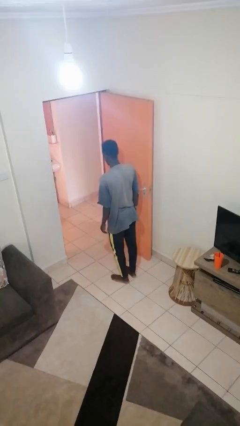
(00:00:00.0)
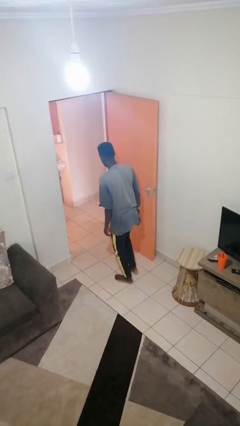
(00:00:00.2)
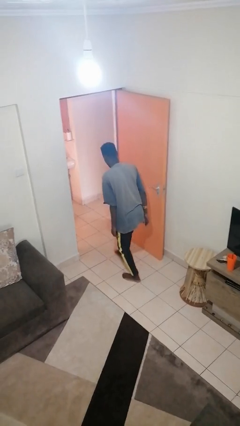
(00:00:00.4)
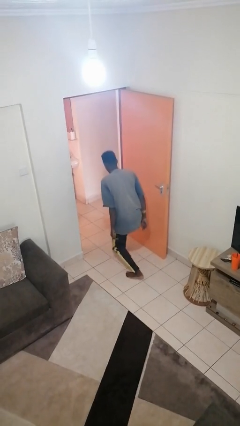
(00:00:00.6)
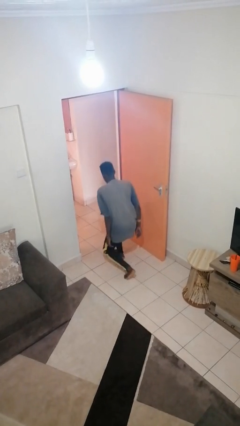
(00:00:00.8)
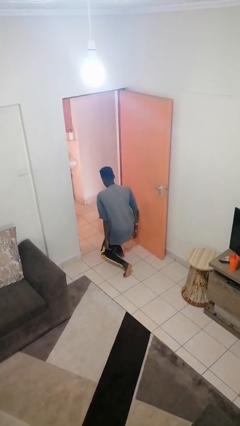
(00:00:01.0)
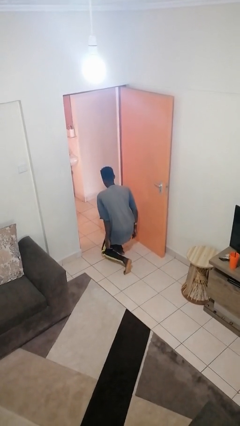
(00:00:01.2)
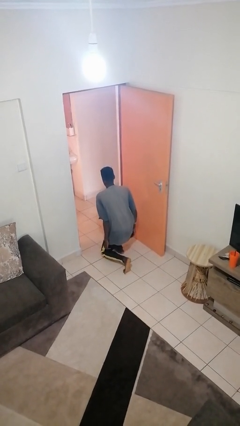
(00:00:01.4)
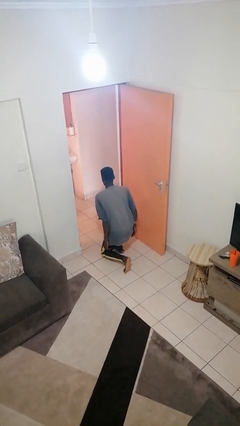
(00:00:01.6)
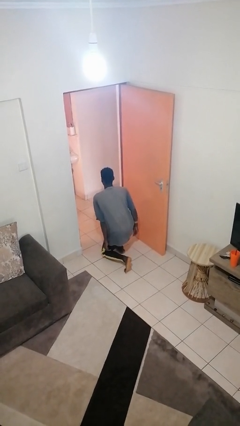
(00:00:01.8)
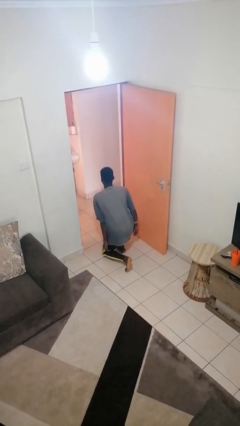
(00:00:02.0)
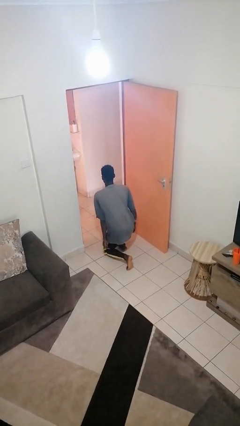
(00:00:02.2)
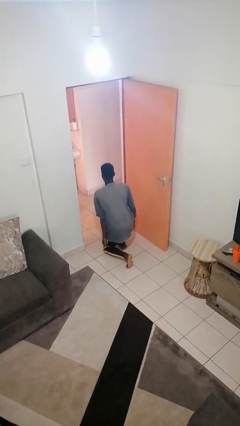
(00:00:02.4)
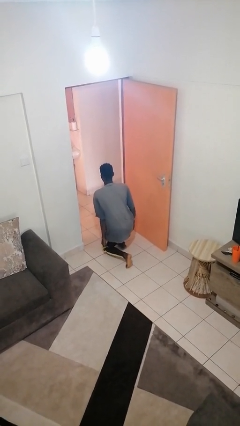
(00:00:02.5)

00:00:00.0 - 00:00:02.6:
person kneels

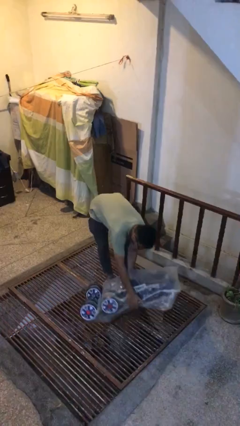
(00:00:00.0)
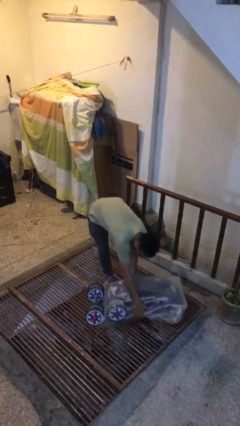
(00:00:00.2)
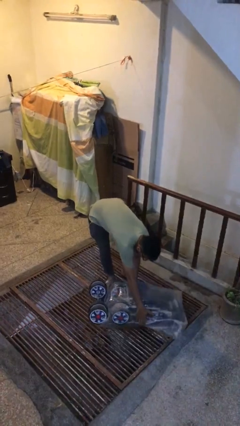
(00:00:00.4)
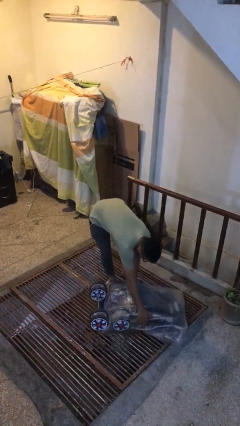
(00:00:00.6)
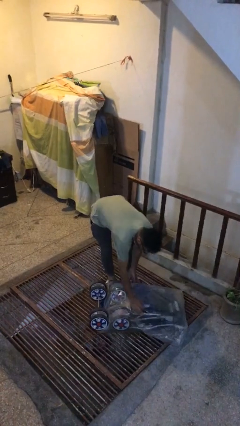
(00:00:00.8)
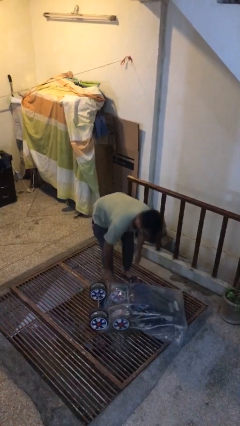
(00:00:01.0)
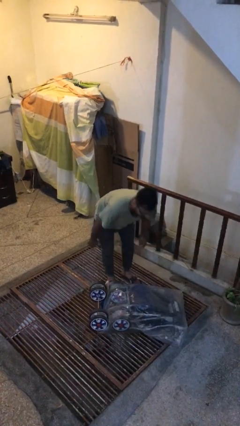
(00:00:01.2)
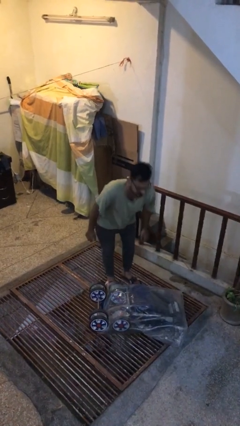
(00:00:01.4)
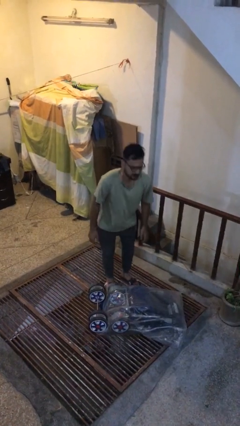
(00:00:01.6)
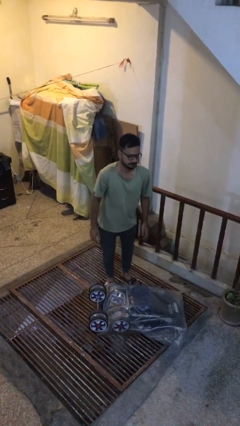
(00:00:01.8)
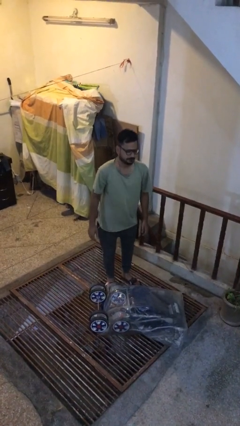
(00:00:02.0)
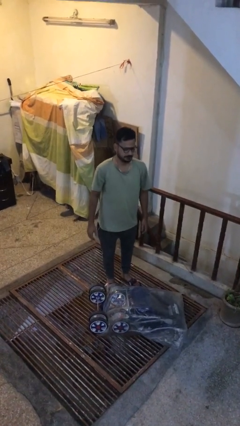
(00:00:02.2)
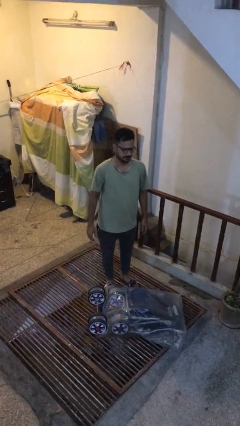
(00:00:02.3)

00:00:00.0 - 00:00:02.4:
person puts down object on floor

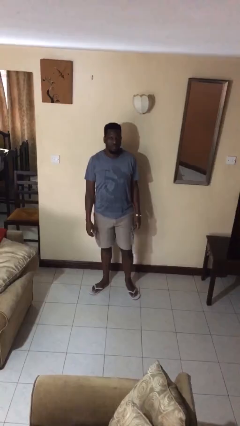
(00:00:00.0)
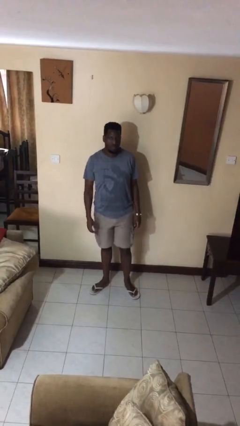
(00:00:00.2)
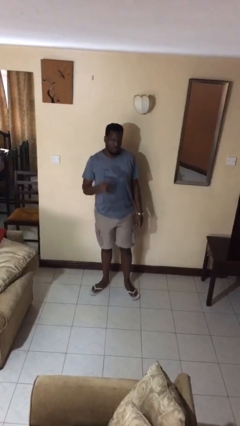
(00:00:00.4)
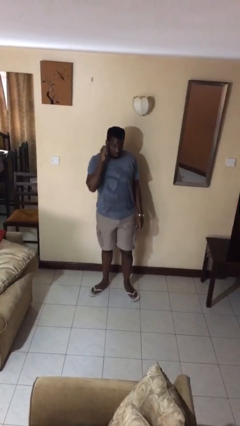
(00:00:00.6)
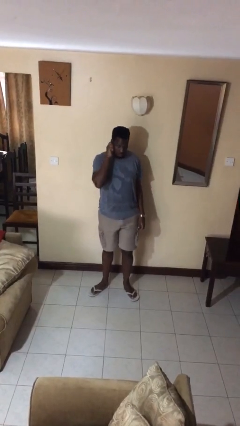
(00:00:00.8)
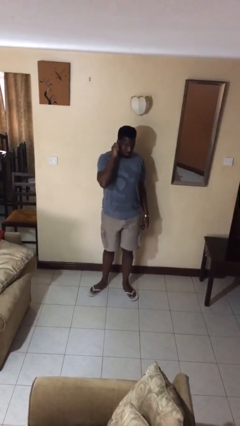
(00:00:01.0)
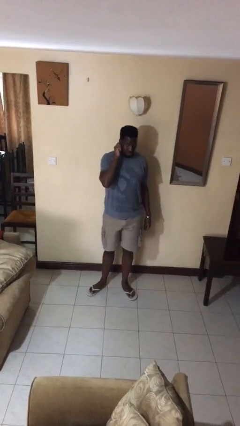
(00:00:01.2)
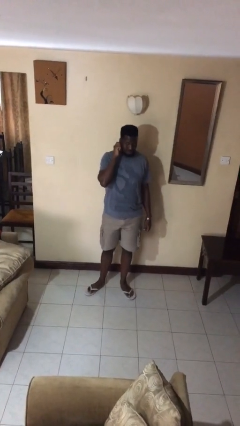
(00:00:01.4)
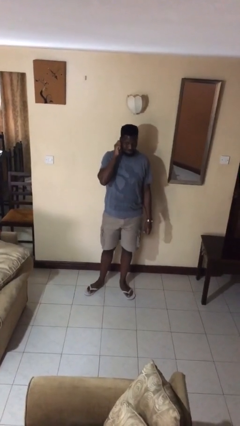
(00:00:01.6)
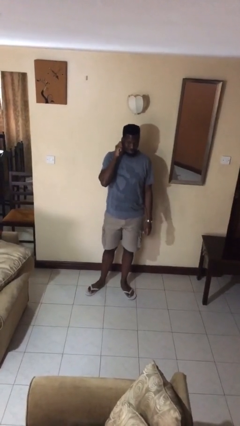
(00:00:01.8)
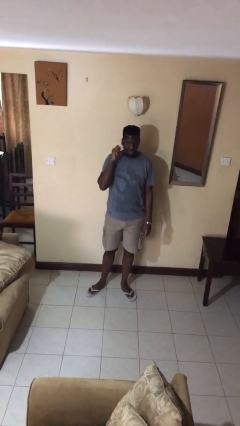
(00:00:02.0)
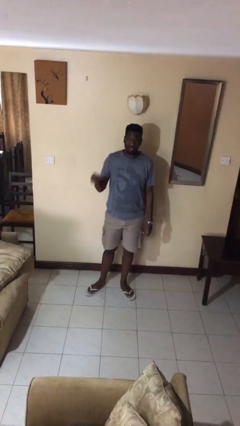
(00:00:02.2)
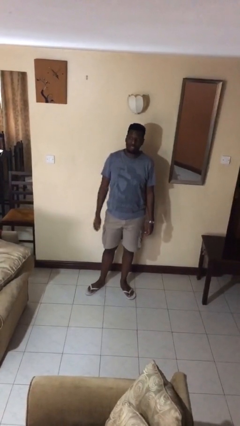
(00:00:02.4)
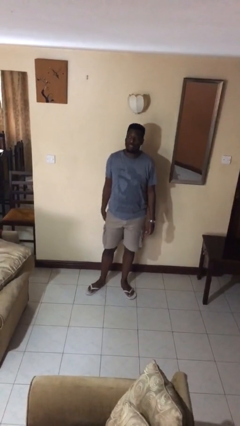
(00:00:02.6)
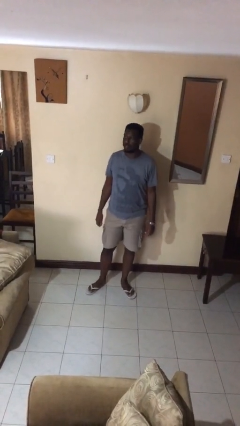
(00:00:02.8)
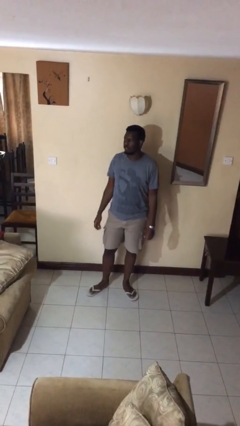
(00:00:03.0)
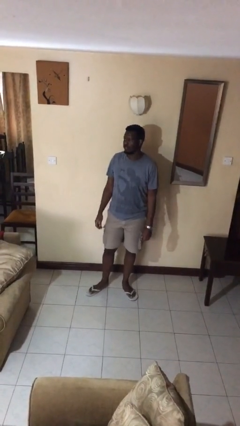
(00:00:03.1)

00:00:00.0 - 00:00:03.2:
person touches earlobe

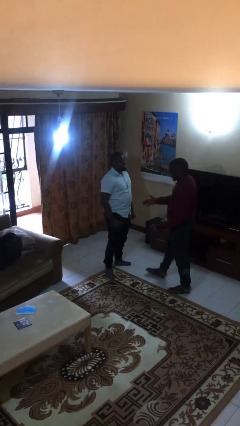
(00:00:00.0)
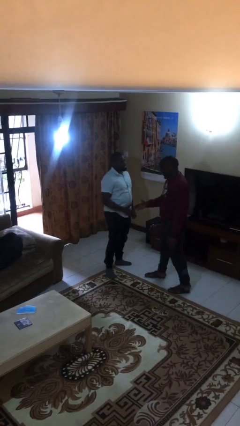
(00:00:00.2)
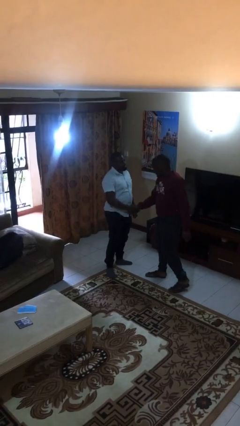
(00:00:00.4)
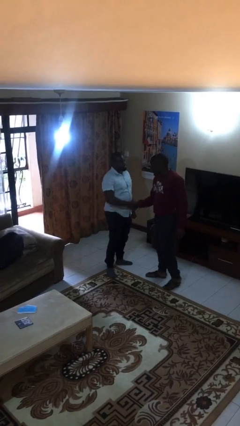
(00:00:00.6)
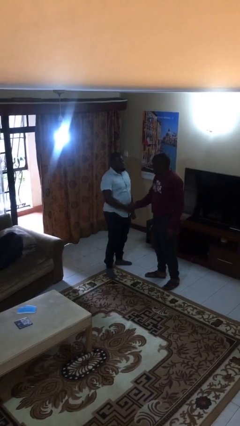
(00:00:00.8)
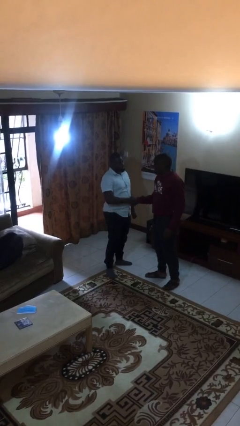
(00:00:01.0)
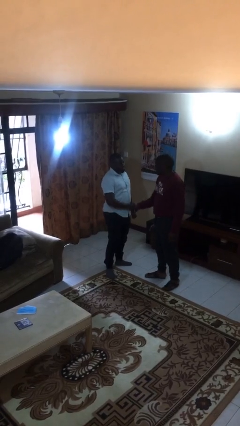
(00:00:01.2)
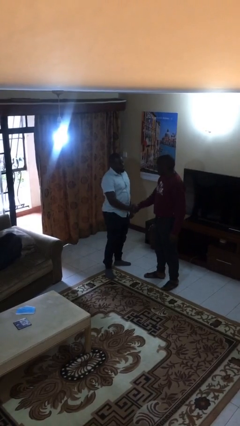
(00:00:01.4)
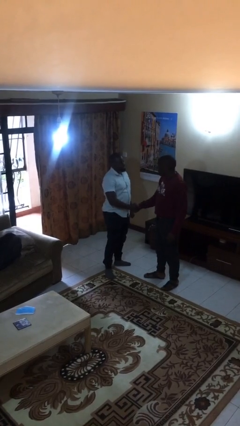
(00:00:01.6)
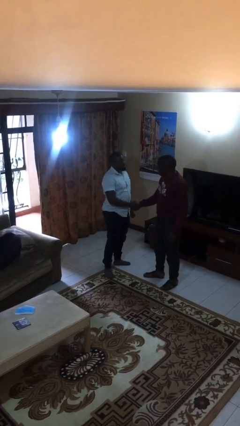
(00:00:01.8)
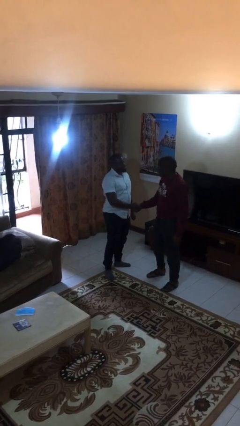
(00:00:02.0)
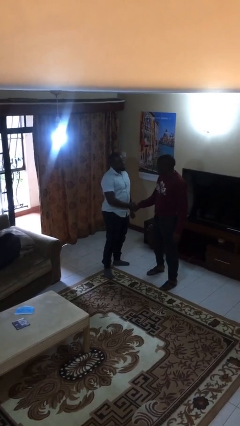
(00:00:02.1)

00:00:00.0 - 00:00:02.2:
person shakes hand

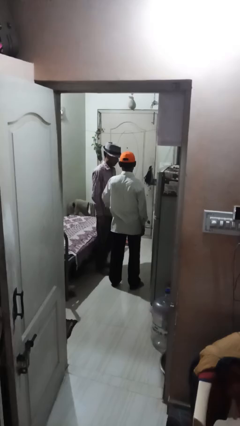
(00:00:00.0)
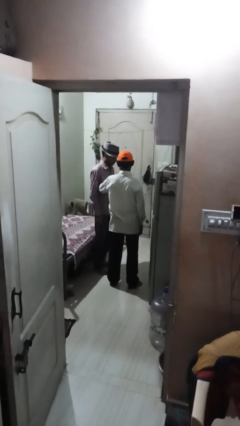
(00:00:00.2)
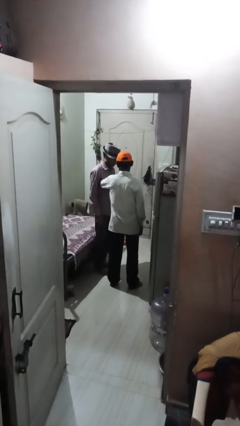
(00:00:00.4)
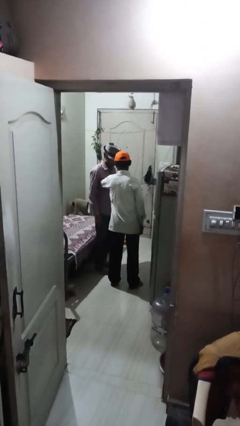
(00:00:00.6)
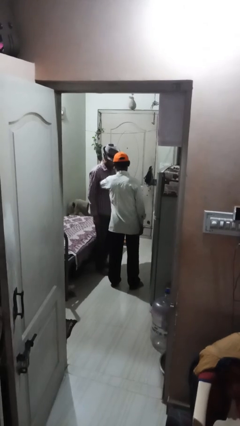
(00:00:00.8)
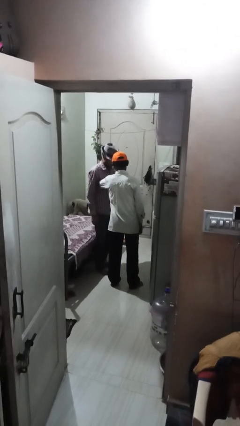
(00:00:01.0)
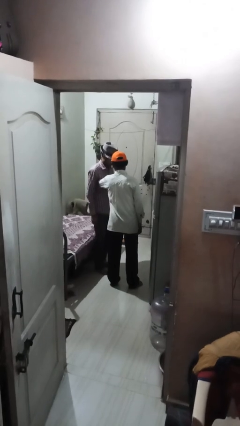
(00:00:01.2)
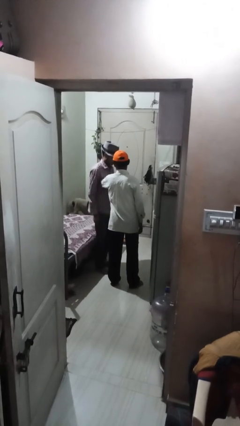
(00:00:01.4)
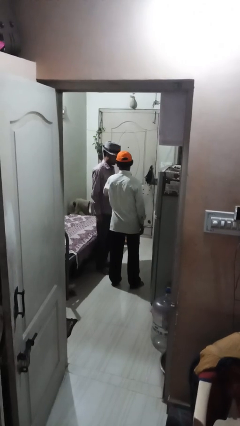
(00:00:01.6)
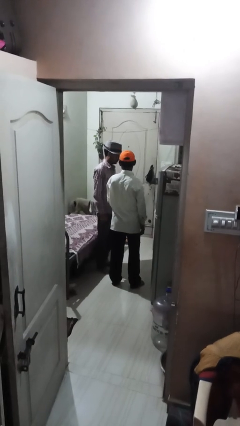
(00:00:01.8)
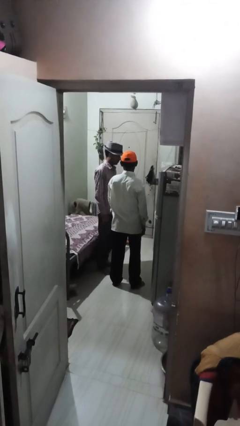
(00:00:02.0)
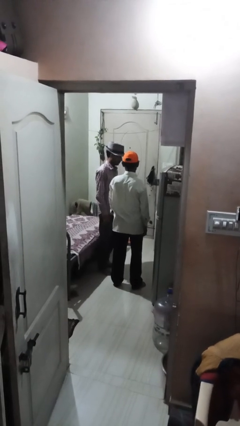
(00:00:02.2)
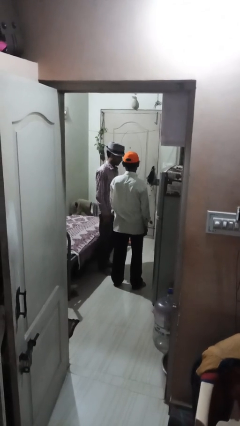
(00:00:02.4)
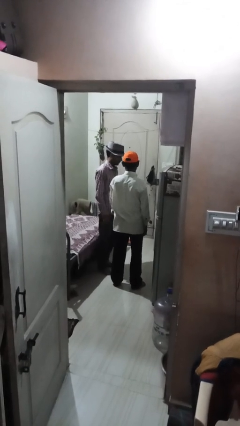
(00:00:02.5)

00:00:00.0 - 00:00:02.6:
person nudges person with elbow

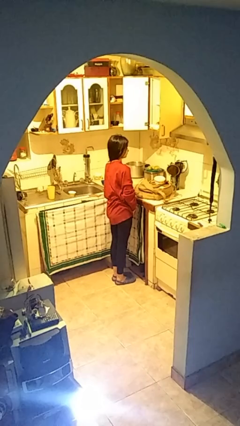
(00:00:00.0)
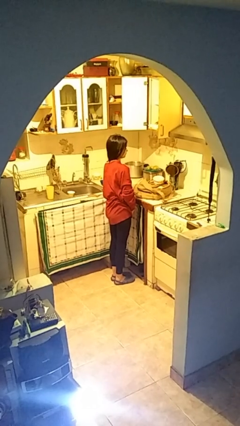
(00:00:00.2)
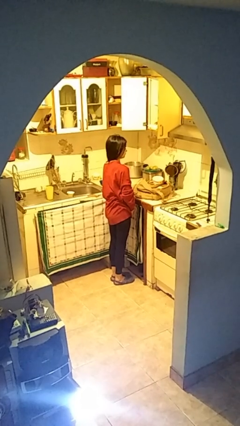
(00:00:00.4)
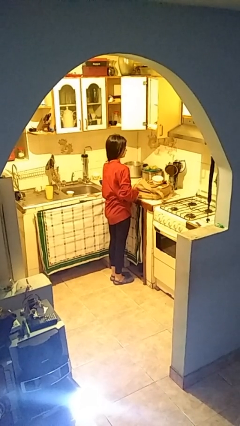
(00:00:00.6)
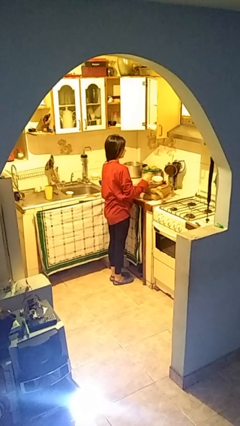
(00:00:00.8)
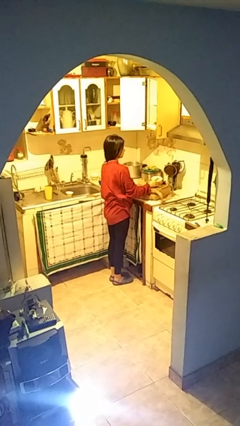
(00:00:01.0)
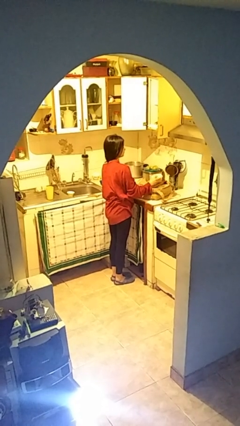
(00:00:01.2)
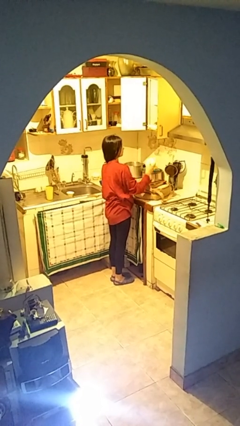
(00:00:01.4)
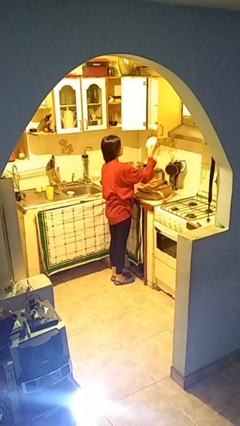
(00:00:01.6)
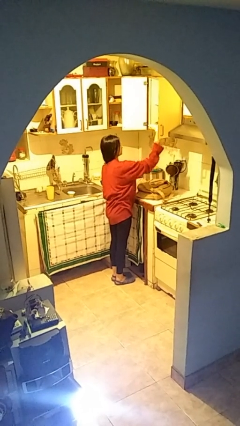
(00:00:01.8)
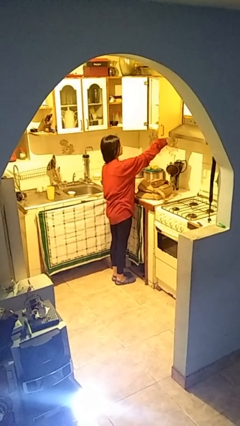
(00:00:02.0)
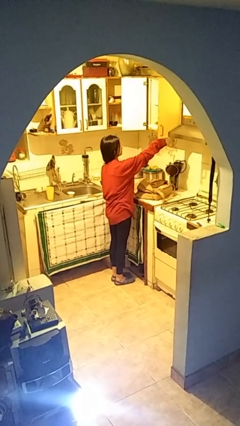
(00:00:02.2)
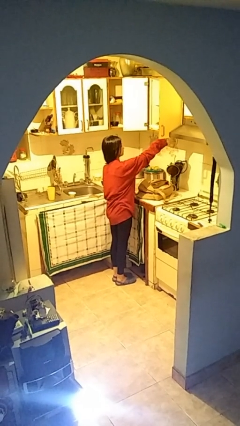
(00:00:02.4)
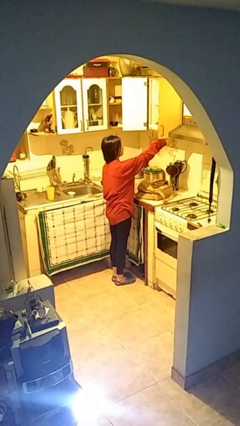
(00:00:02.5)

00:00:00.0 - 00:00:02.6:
person loads groceries into cabinet

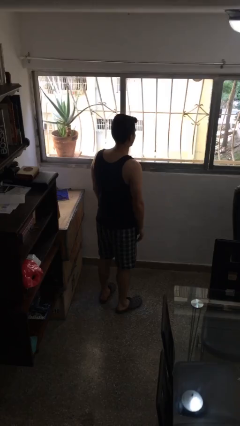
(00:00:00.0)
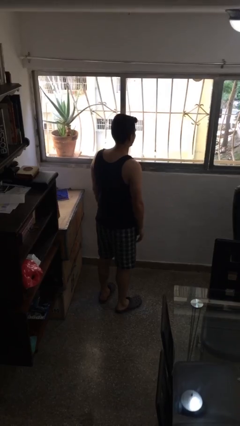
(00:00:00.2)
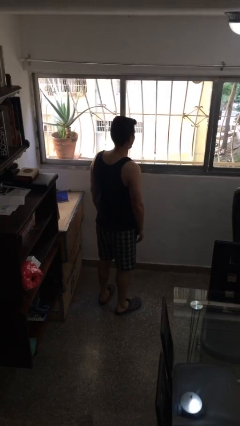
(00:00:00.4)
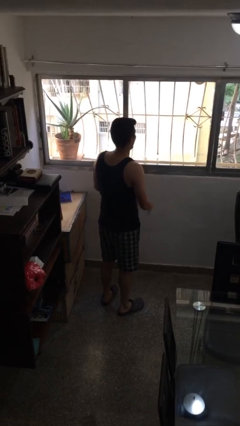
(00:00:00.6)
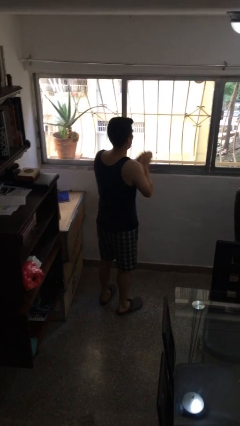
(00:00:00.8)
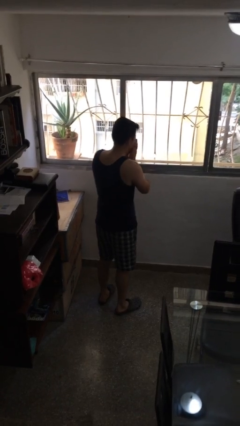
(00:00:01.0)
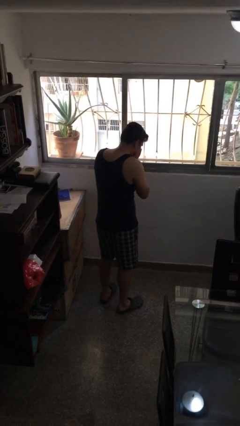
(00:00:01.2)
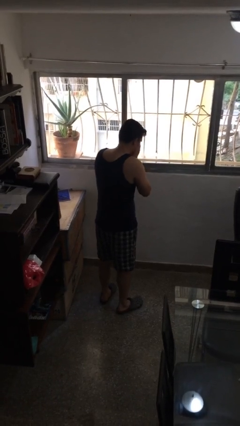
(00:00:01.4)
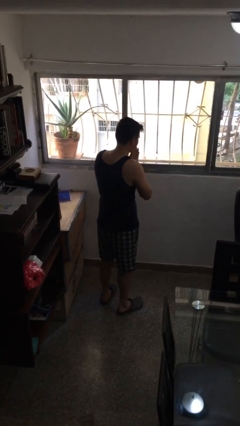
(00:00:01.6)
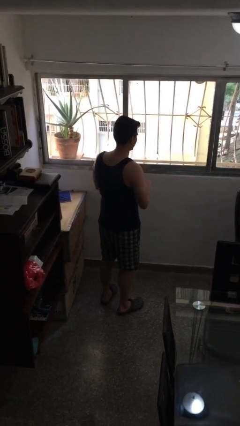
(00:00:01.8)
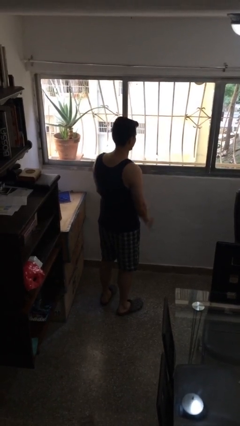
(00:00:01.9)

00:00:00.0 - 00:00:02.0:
person sneezes into hand
